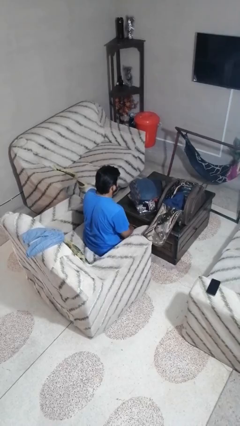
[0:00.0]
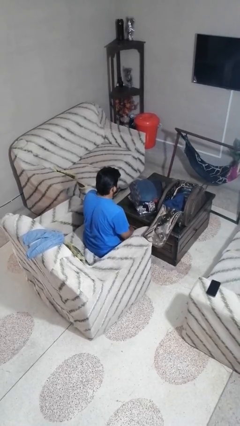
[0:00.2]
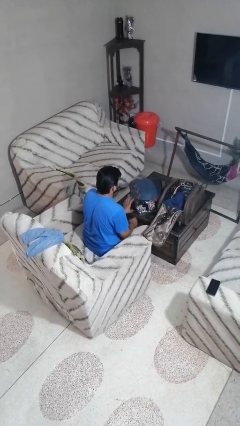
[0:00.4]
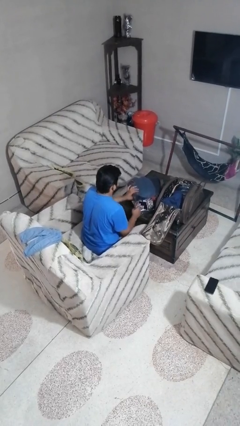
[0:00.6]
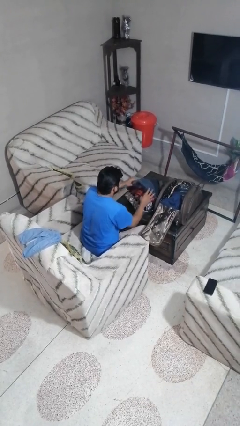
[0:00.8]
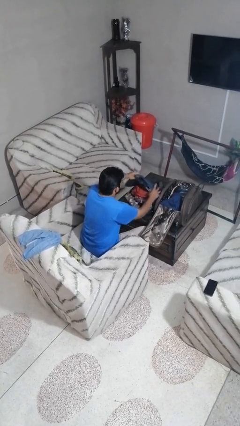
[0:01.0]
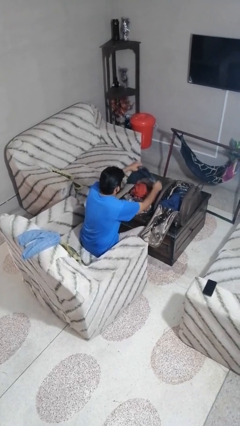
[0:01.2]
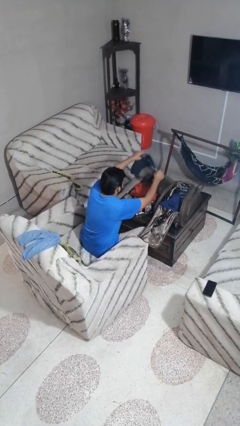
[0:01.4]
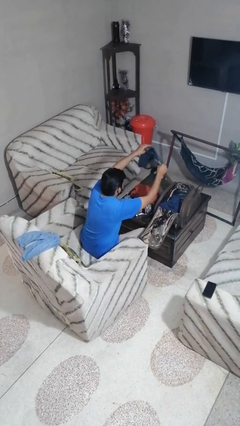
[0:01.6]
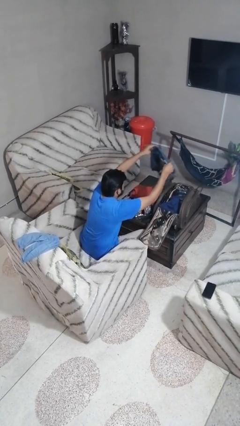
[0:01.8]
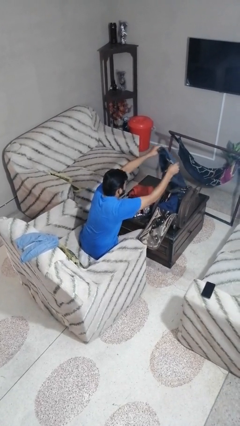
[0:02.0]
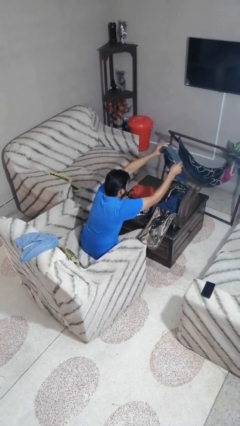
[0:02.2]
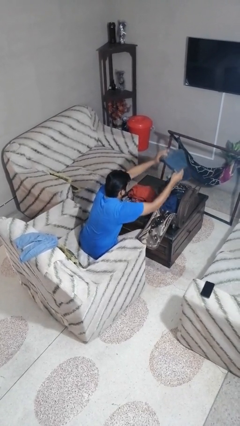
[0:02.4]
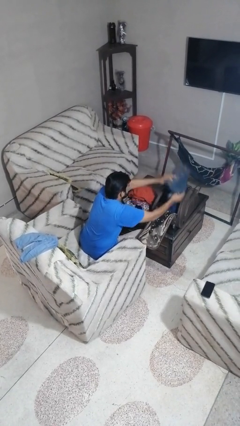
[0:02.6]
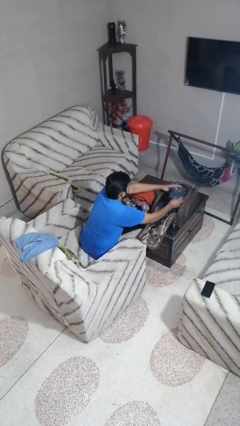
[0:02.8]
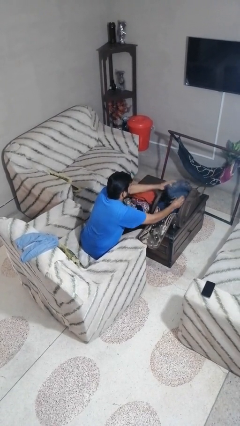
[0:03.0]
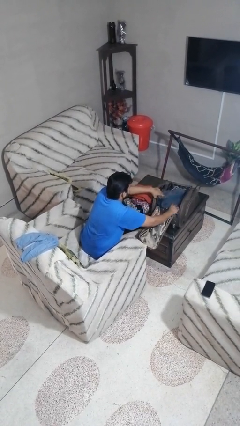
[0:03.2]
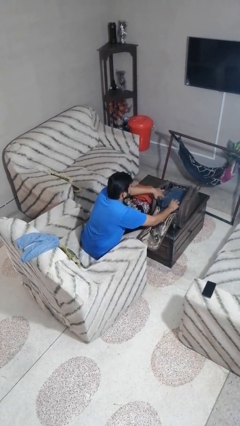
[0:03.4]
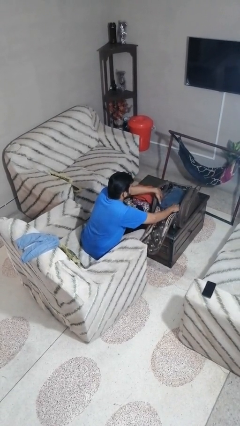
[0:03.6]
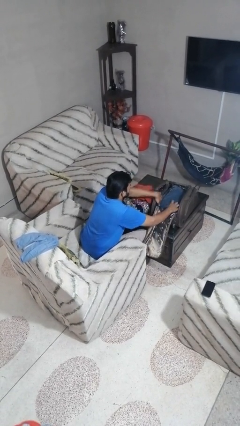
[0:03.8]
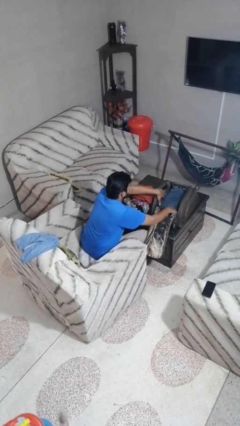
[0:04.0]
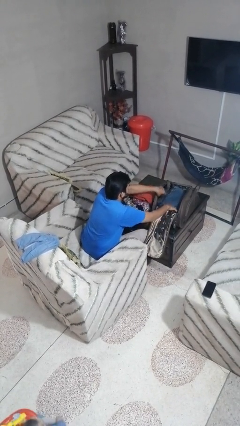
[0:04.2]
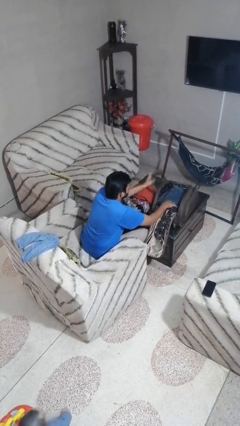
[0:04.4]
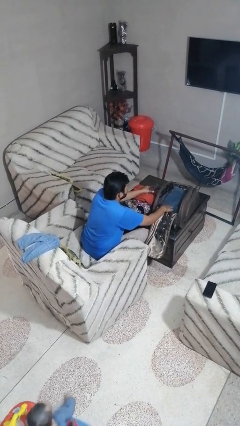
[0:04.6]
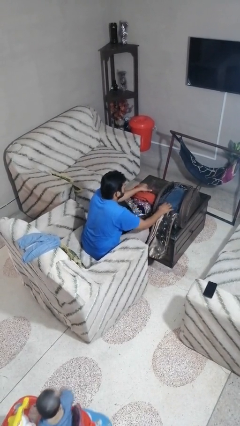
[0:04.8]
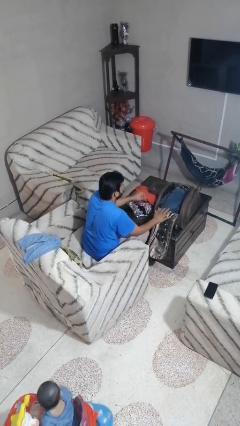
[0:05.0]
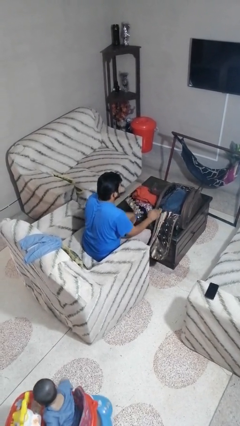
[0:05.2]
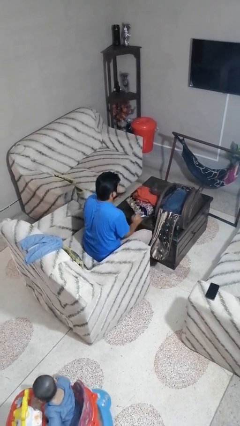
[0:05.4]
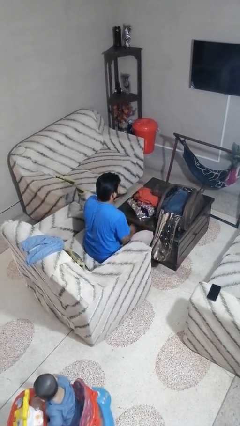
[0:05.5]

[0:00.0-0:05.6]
person loads clothes into suitcase

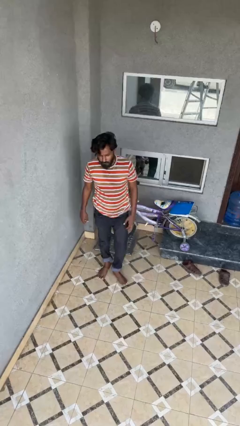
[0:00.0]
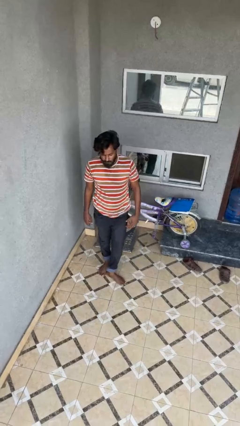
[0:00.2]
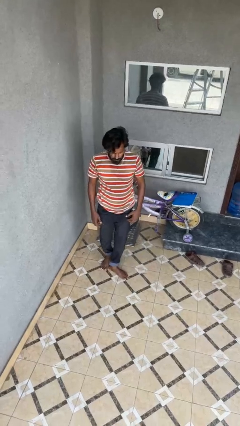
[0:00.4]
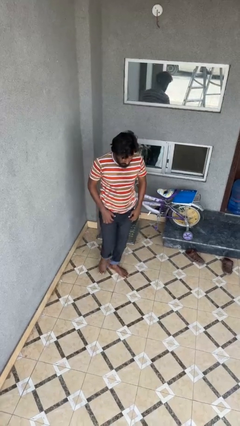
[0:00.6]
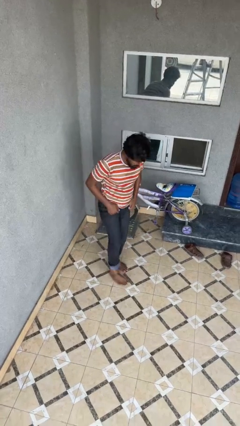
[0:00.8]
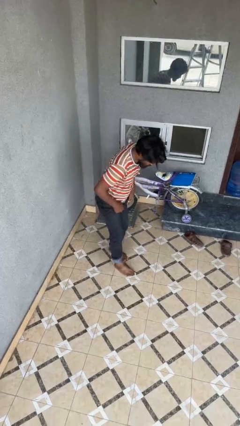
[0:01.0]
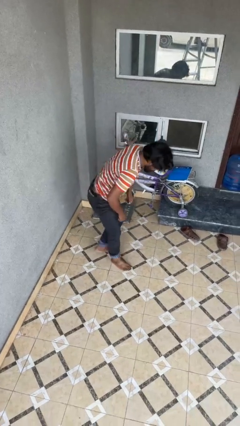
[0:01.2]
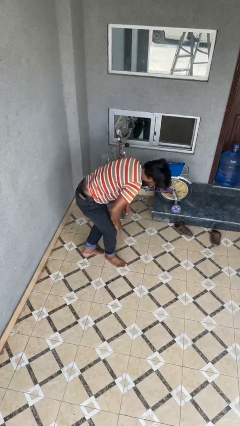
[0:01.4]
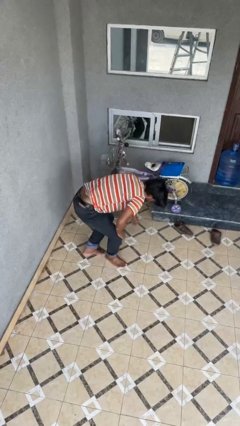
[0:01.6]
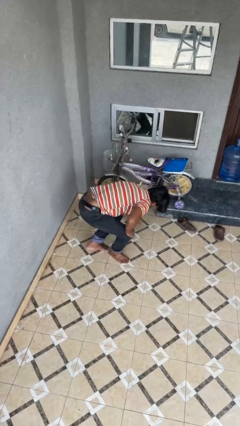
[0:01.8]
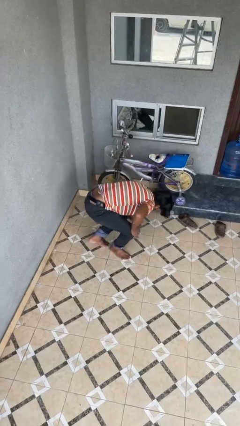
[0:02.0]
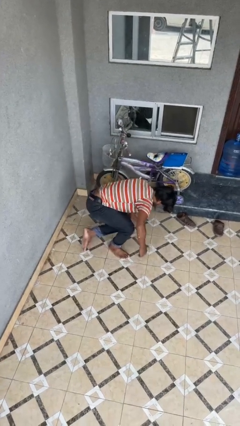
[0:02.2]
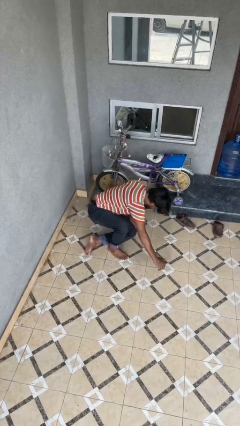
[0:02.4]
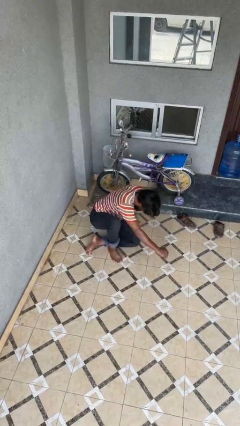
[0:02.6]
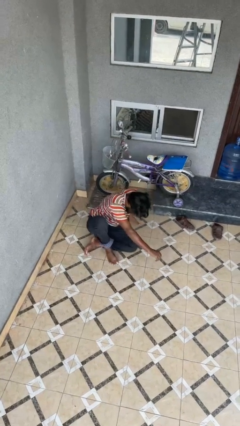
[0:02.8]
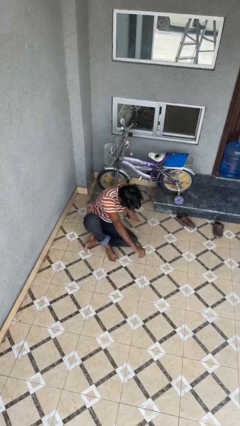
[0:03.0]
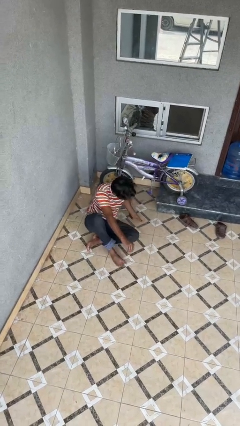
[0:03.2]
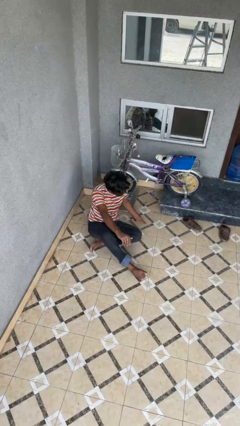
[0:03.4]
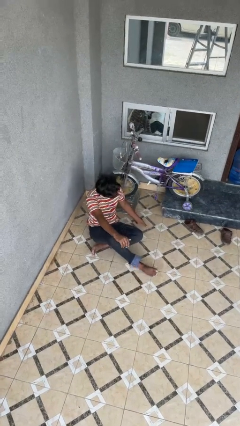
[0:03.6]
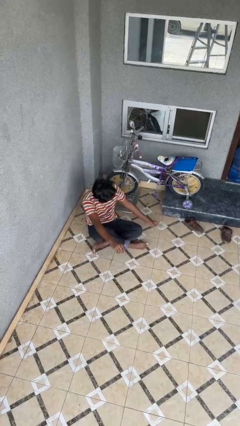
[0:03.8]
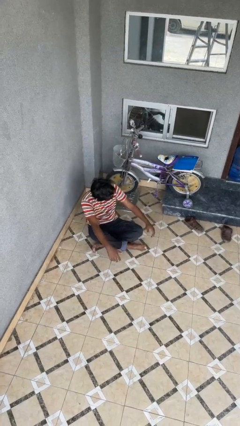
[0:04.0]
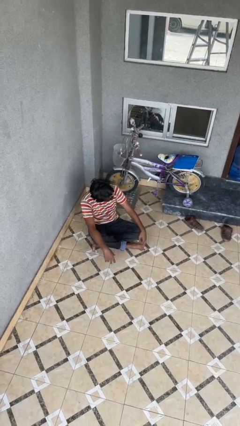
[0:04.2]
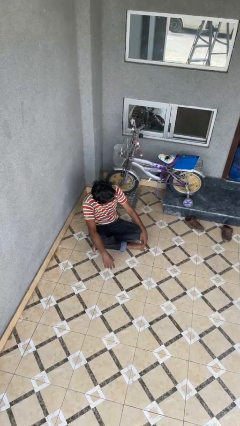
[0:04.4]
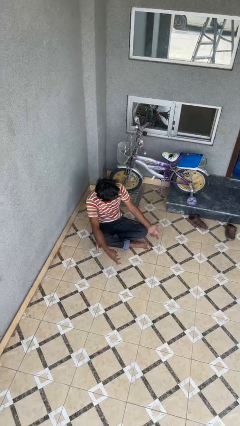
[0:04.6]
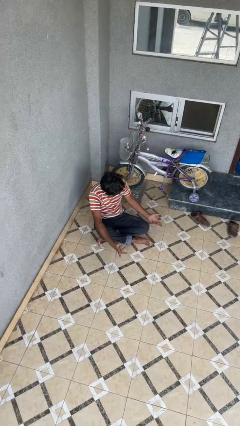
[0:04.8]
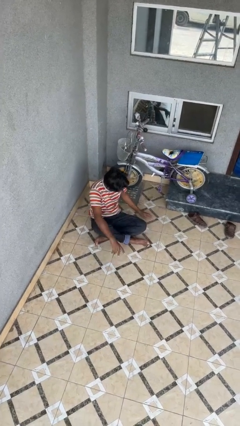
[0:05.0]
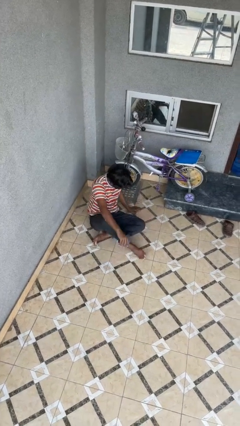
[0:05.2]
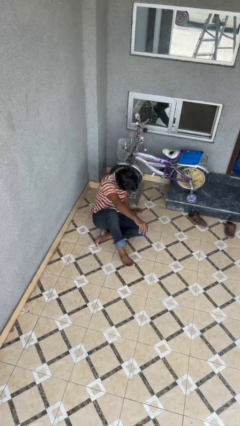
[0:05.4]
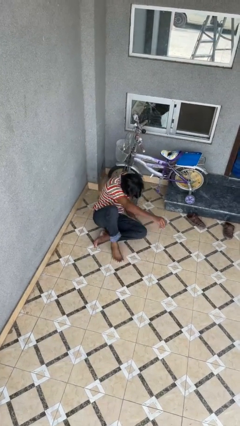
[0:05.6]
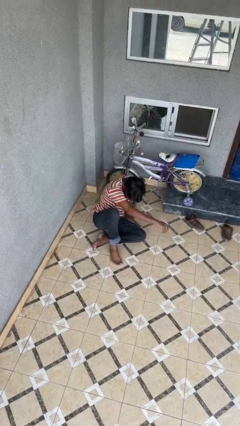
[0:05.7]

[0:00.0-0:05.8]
person sits crisscross

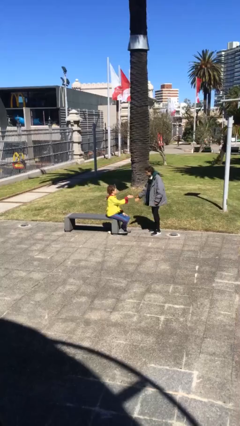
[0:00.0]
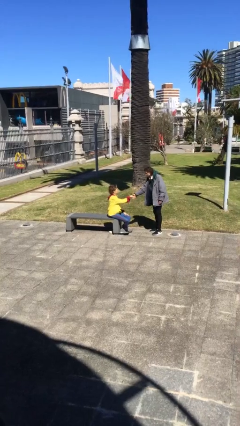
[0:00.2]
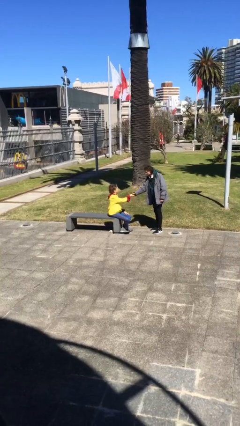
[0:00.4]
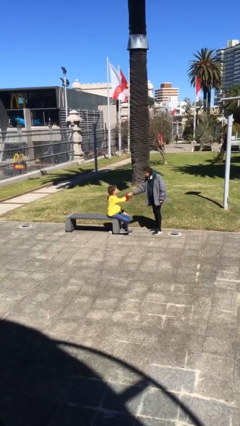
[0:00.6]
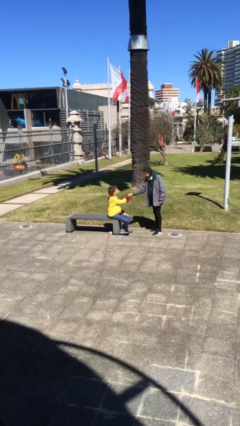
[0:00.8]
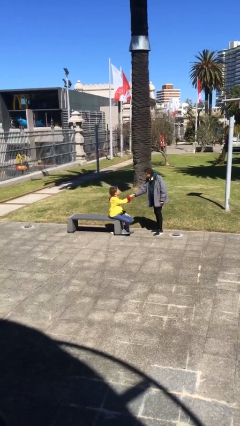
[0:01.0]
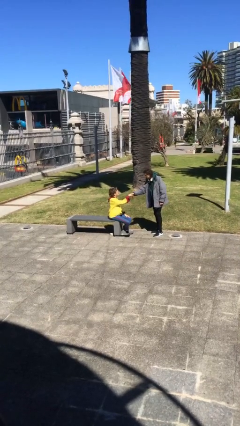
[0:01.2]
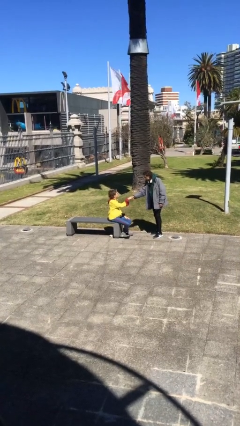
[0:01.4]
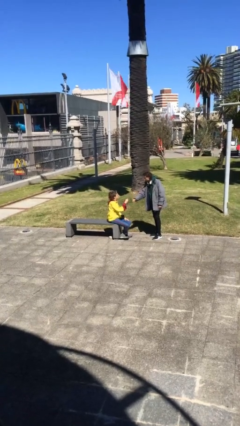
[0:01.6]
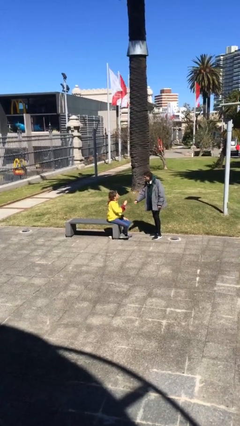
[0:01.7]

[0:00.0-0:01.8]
person shakes hand

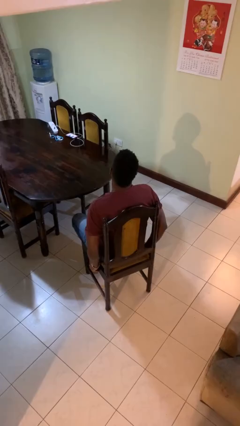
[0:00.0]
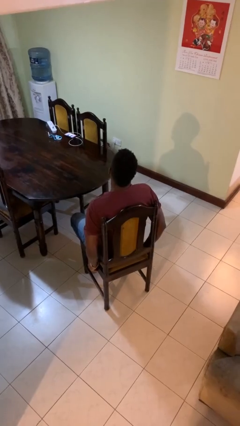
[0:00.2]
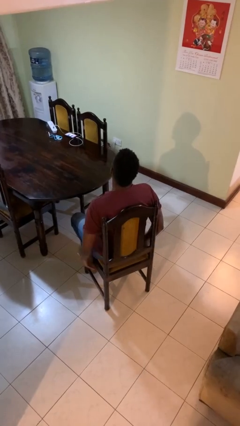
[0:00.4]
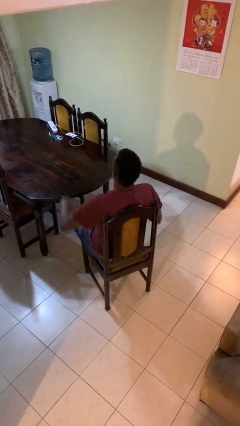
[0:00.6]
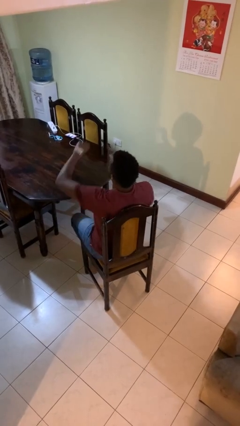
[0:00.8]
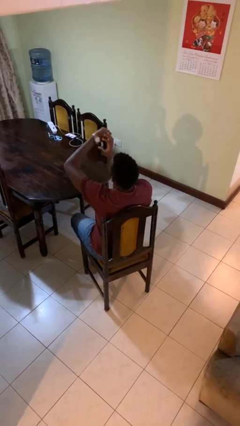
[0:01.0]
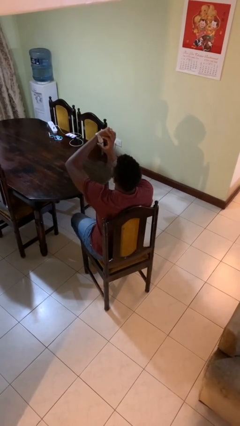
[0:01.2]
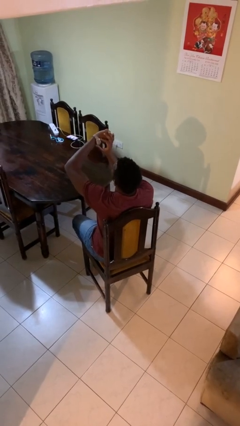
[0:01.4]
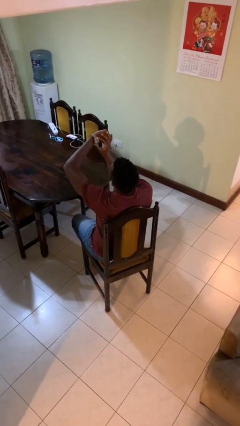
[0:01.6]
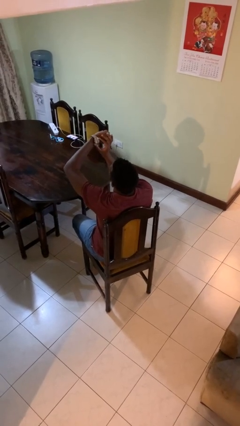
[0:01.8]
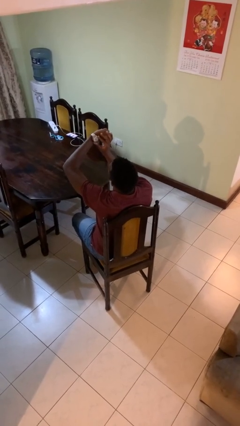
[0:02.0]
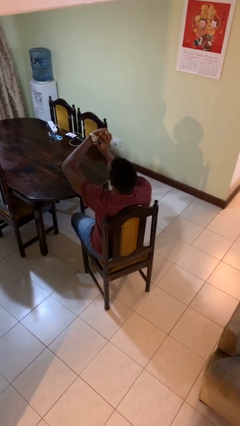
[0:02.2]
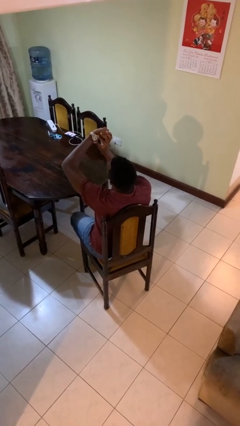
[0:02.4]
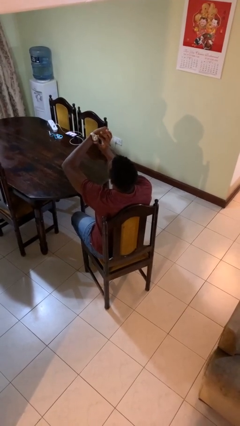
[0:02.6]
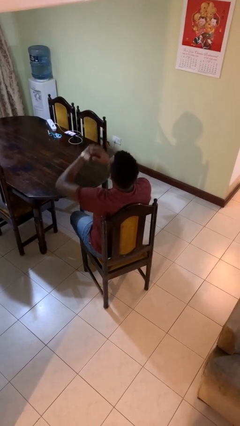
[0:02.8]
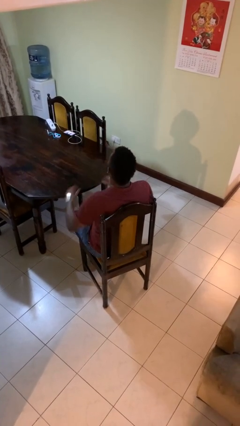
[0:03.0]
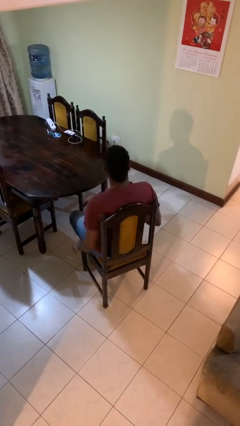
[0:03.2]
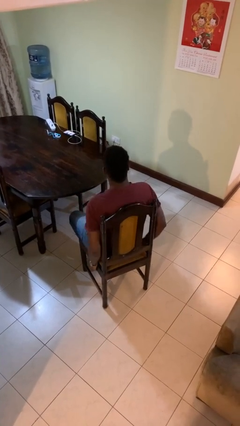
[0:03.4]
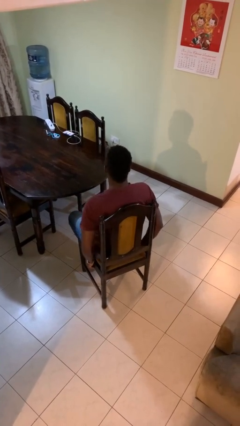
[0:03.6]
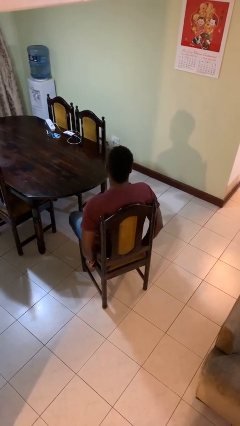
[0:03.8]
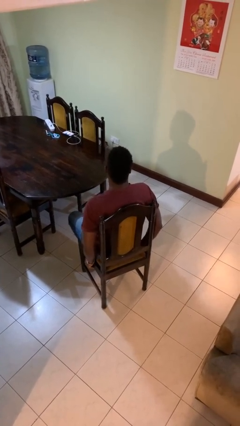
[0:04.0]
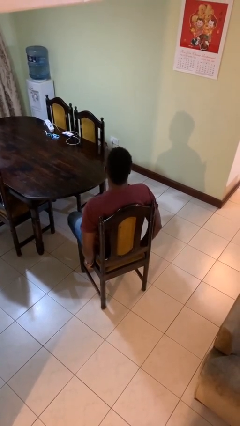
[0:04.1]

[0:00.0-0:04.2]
person looks at wristwatch

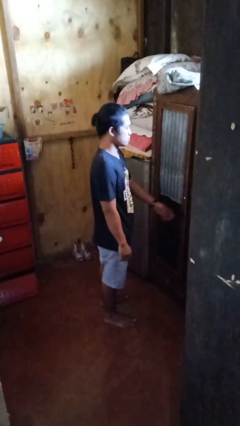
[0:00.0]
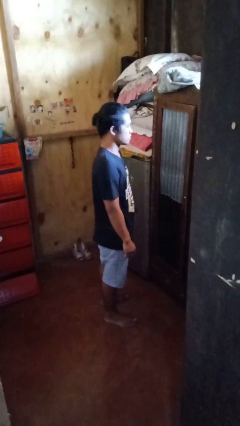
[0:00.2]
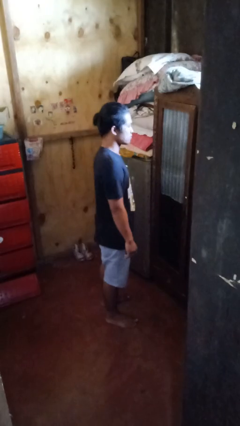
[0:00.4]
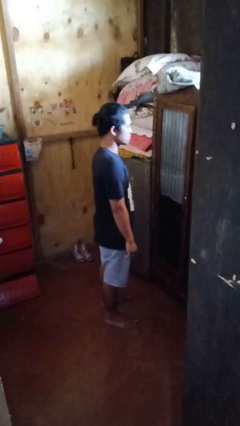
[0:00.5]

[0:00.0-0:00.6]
person closes closet door
